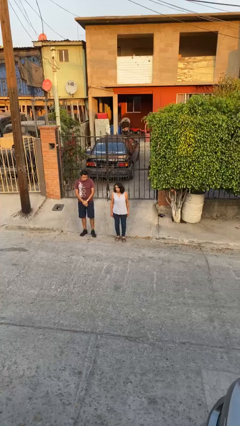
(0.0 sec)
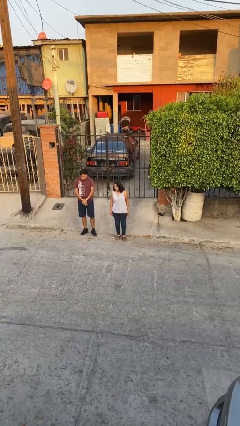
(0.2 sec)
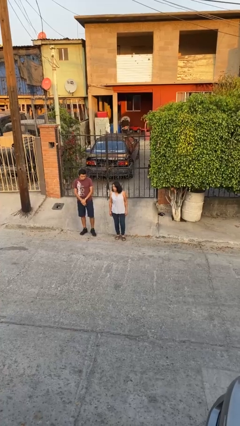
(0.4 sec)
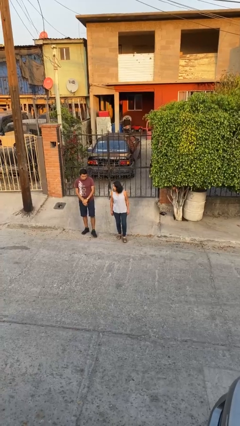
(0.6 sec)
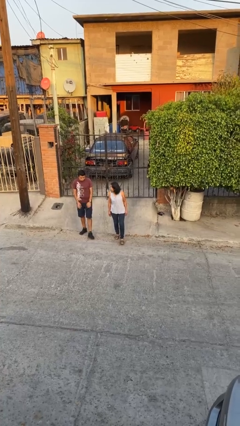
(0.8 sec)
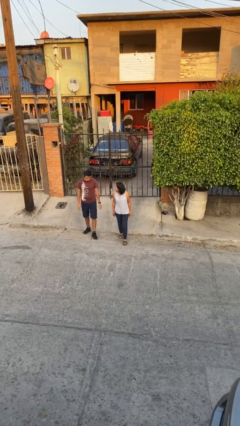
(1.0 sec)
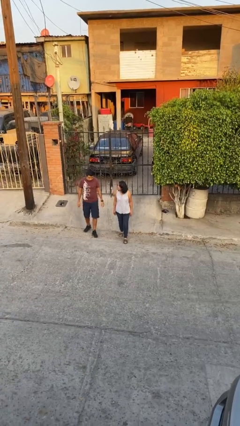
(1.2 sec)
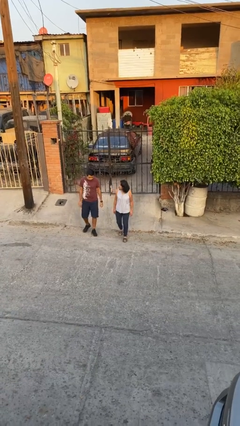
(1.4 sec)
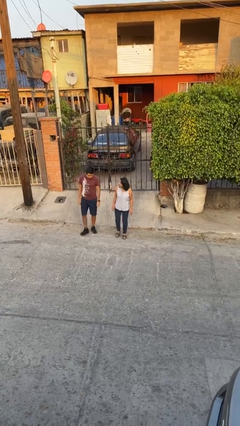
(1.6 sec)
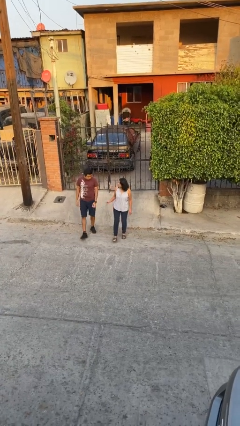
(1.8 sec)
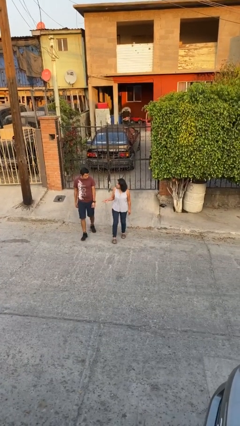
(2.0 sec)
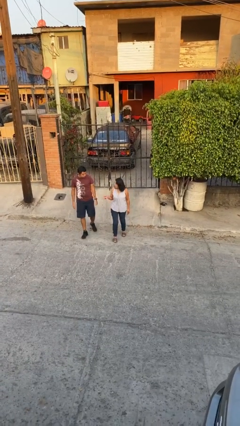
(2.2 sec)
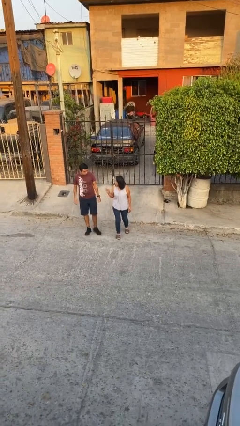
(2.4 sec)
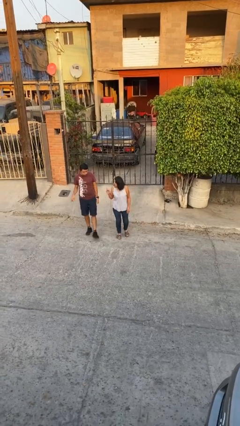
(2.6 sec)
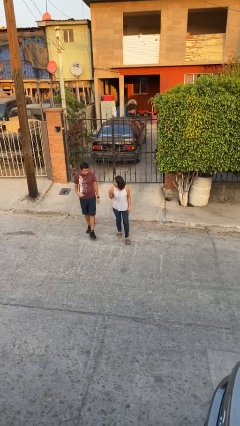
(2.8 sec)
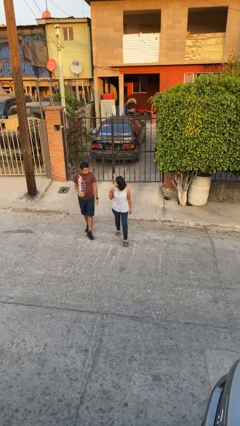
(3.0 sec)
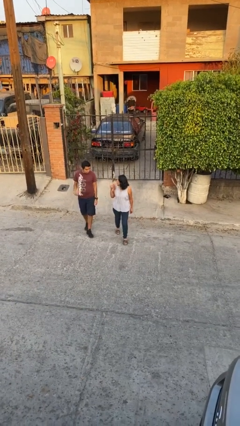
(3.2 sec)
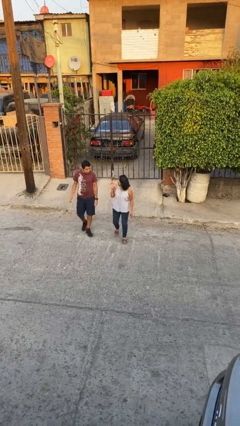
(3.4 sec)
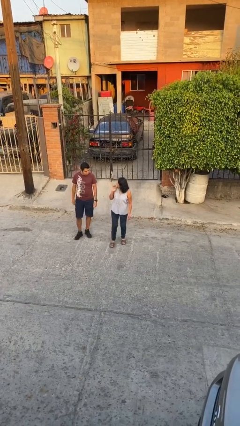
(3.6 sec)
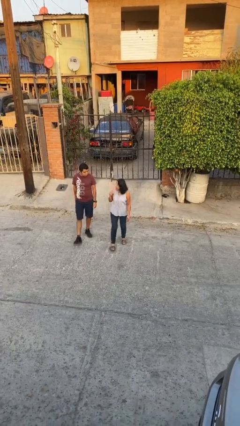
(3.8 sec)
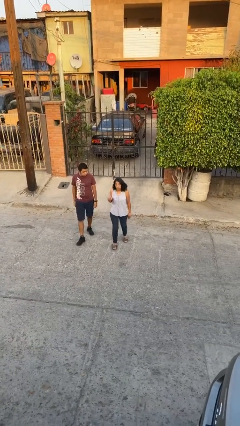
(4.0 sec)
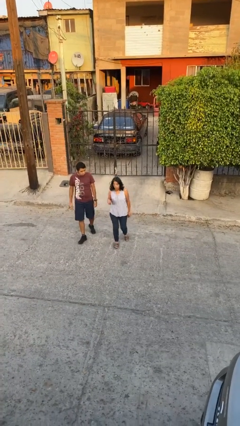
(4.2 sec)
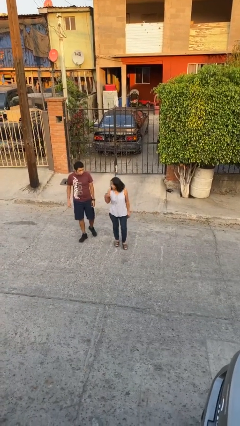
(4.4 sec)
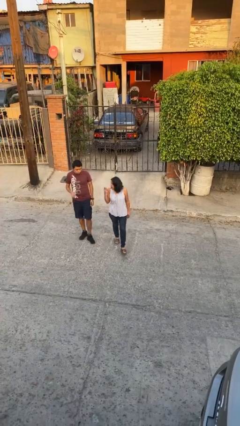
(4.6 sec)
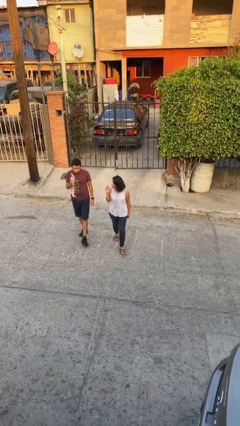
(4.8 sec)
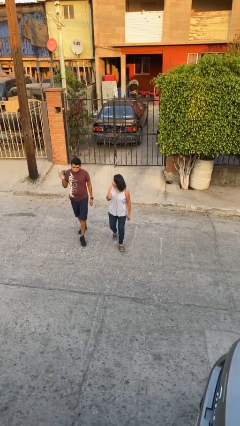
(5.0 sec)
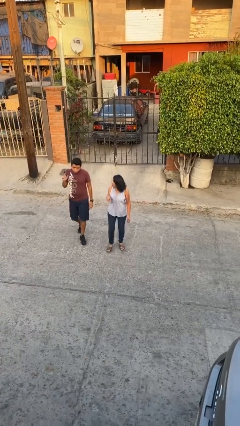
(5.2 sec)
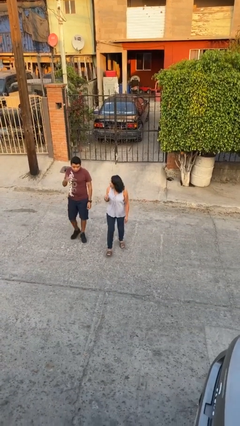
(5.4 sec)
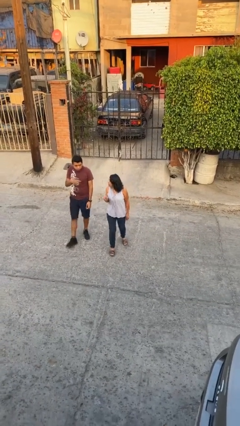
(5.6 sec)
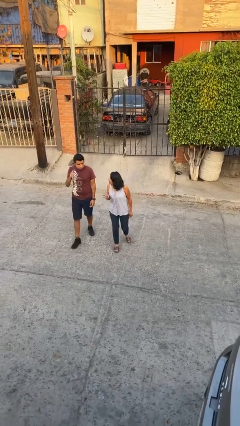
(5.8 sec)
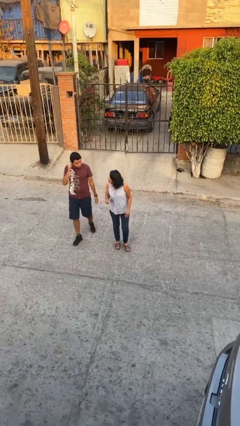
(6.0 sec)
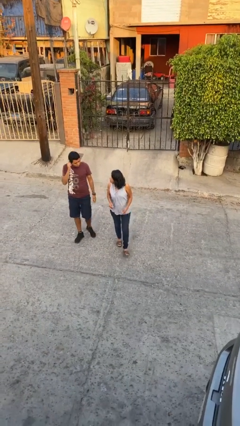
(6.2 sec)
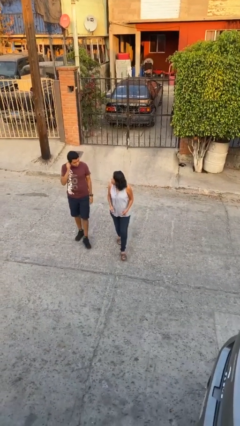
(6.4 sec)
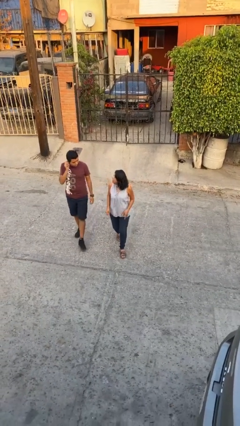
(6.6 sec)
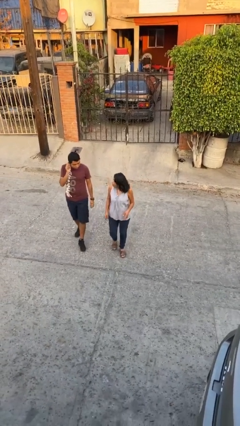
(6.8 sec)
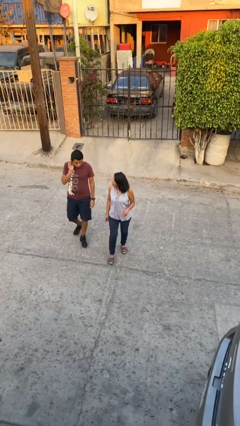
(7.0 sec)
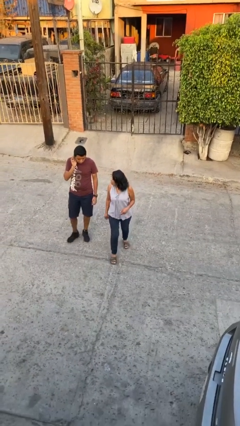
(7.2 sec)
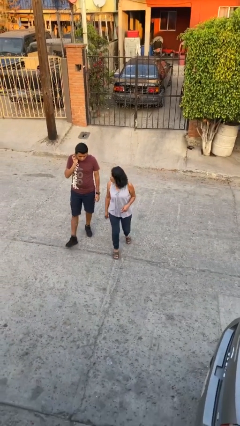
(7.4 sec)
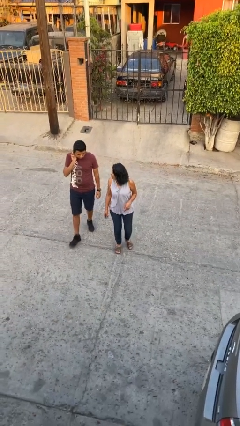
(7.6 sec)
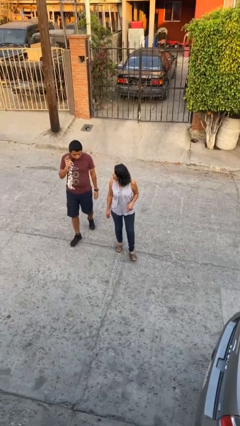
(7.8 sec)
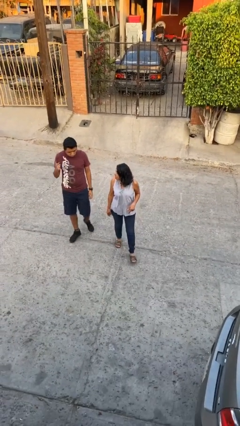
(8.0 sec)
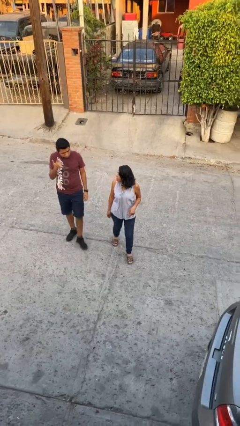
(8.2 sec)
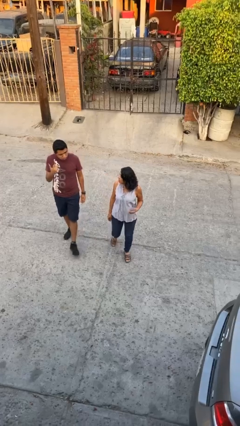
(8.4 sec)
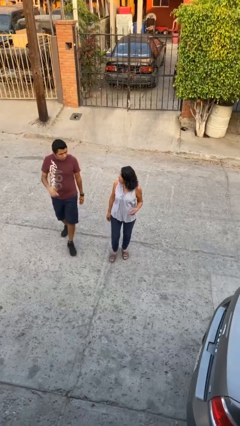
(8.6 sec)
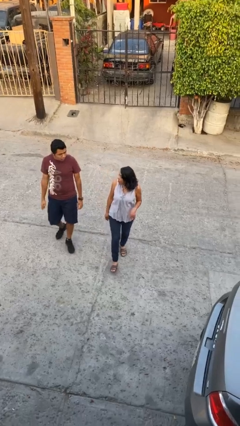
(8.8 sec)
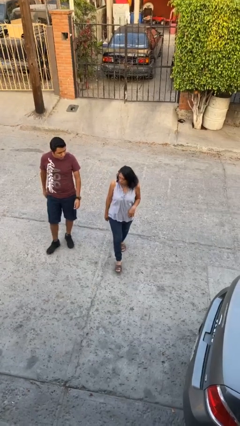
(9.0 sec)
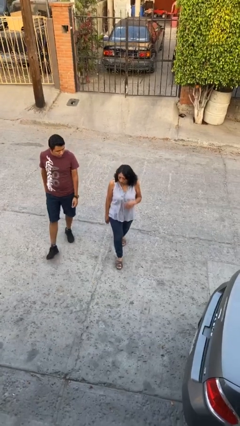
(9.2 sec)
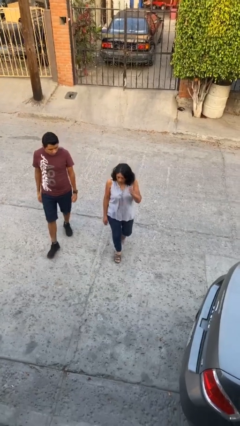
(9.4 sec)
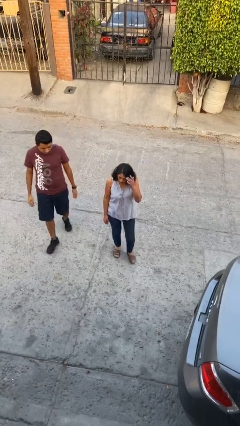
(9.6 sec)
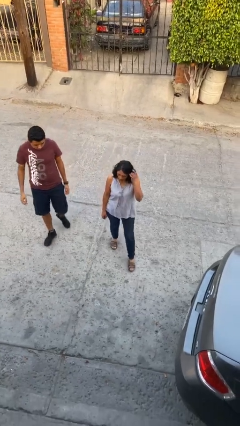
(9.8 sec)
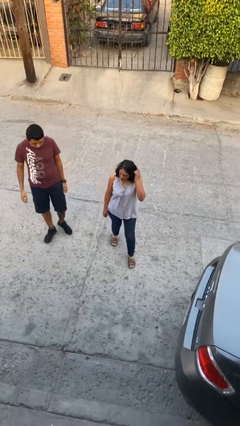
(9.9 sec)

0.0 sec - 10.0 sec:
person talks to person

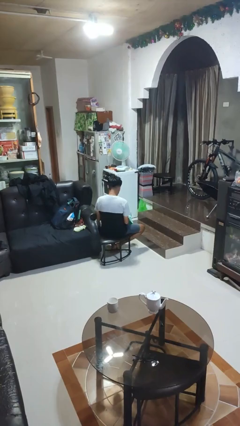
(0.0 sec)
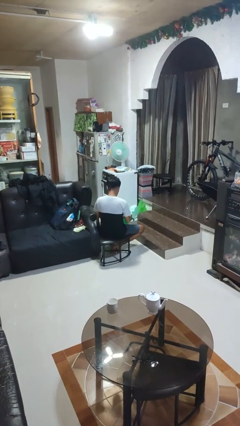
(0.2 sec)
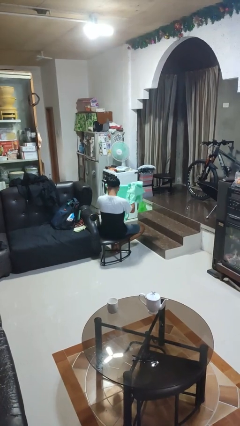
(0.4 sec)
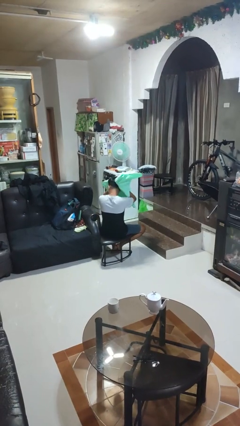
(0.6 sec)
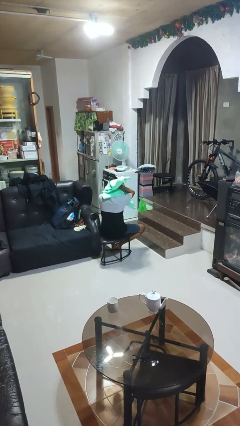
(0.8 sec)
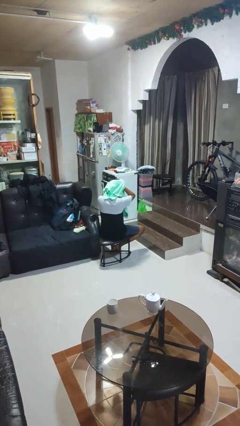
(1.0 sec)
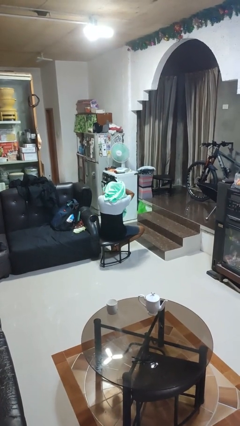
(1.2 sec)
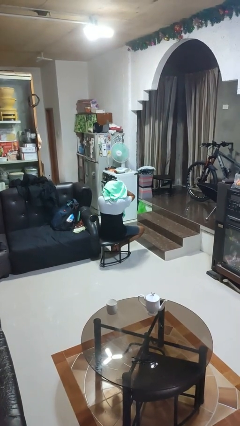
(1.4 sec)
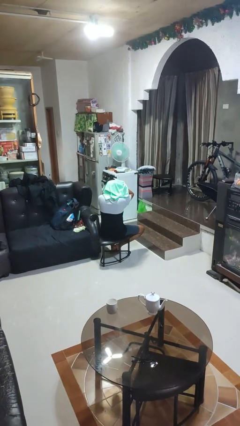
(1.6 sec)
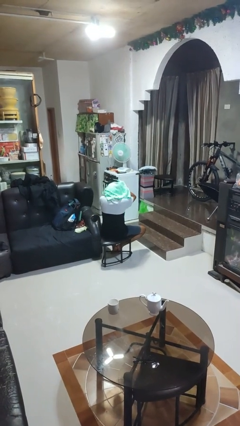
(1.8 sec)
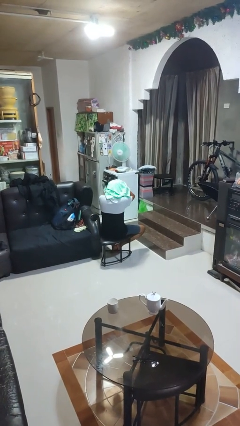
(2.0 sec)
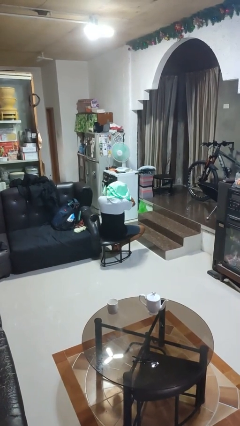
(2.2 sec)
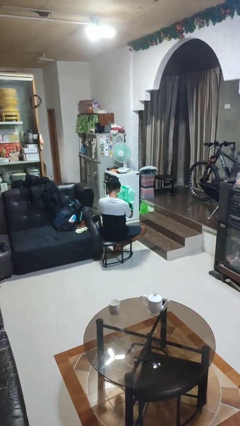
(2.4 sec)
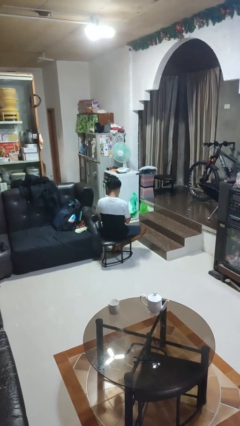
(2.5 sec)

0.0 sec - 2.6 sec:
person dries hair with towel

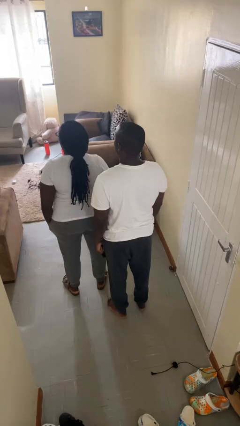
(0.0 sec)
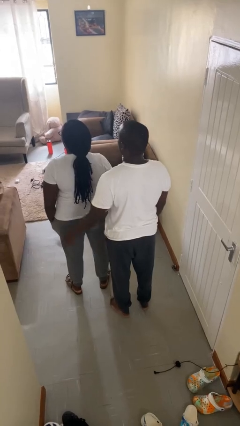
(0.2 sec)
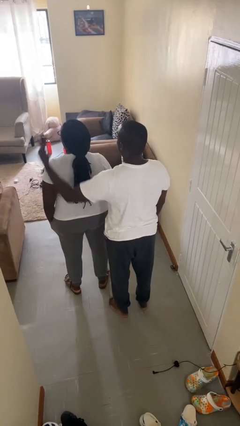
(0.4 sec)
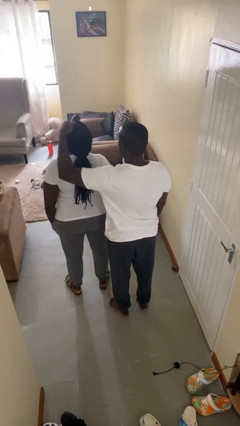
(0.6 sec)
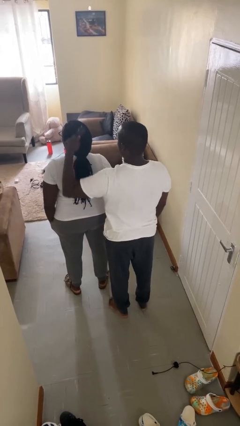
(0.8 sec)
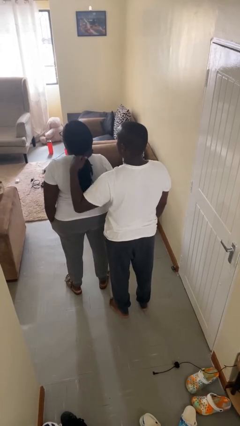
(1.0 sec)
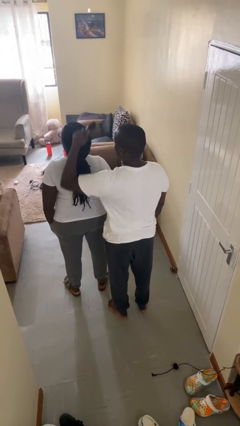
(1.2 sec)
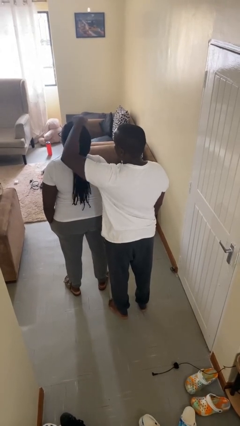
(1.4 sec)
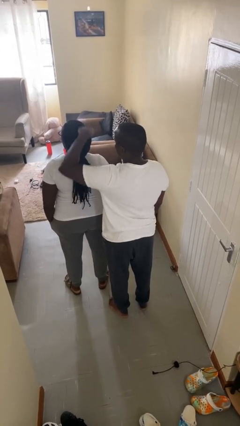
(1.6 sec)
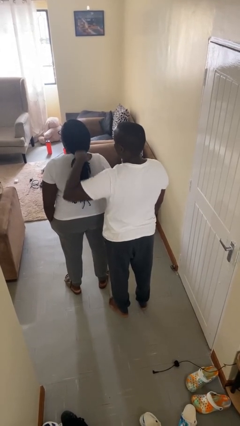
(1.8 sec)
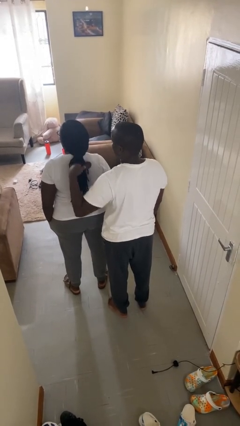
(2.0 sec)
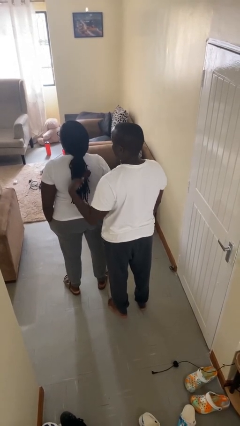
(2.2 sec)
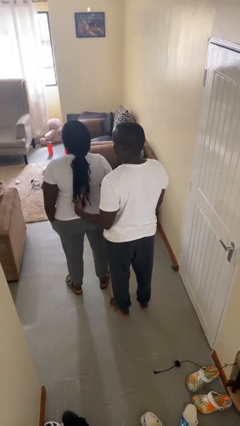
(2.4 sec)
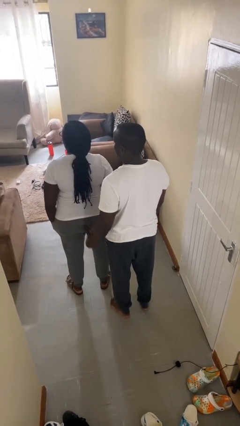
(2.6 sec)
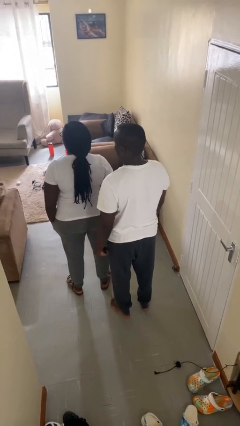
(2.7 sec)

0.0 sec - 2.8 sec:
person brushes hair of person

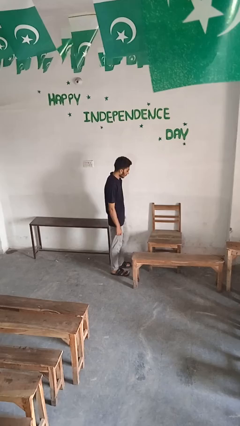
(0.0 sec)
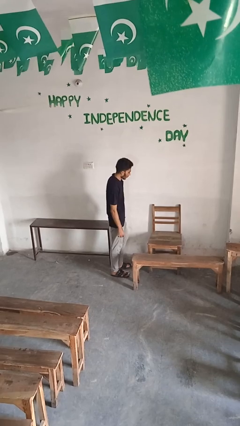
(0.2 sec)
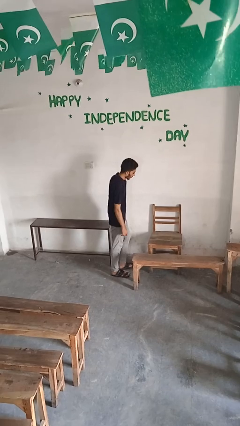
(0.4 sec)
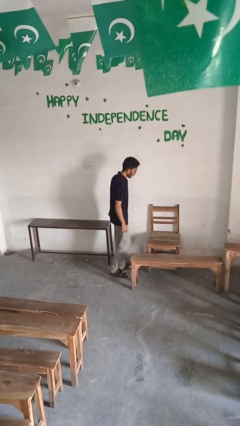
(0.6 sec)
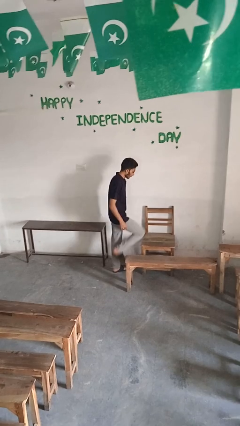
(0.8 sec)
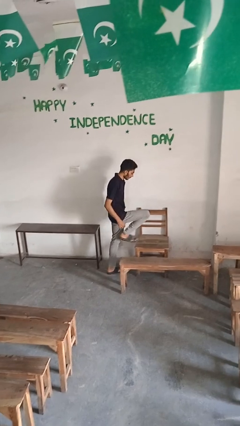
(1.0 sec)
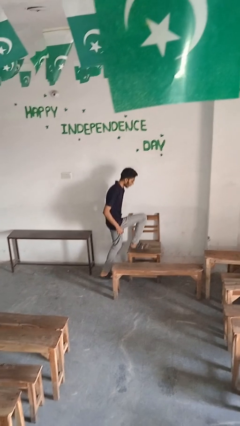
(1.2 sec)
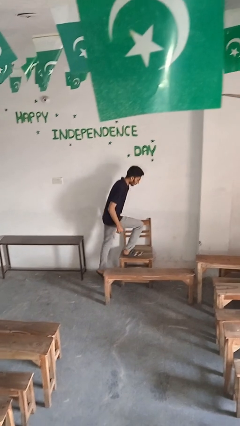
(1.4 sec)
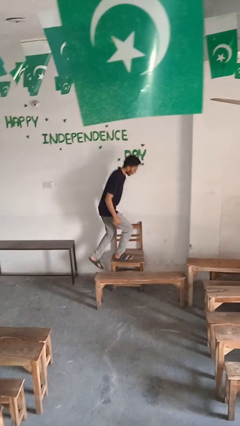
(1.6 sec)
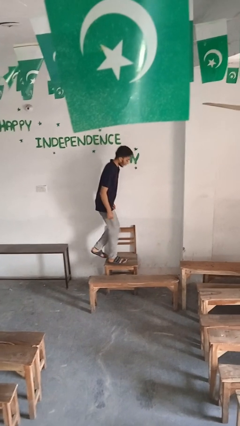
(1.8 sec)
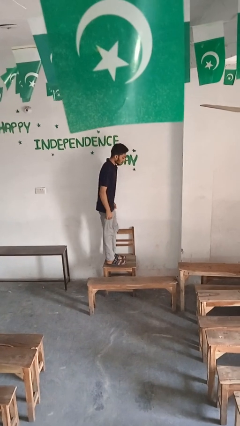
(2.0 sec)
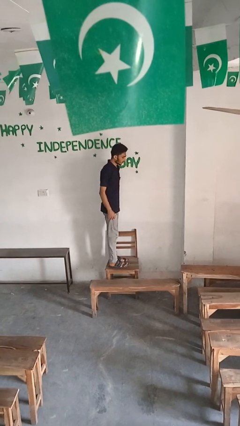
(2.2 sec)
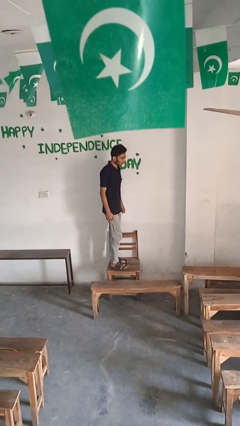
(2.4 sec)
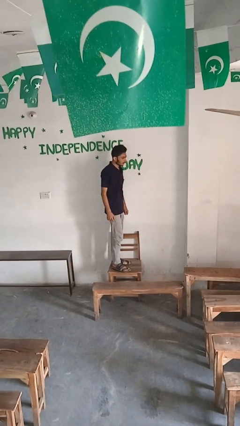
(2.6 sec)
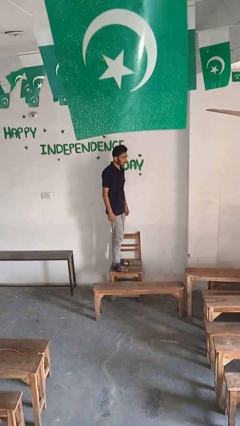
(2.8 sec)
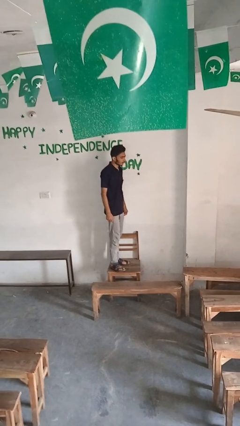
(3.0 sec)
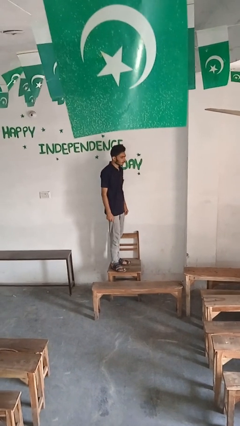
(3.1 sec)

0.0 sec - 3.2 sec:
person climbs on chair
